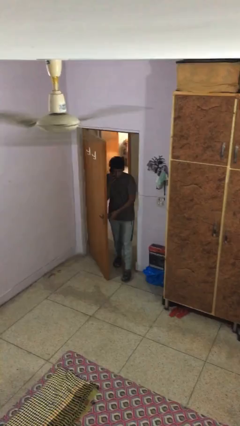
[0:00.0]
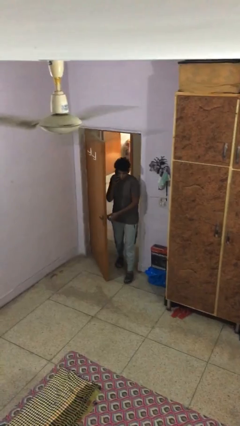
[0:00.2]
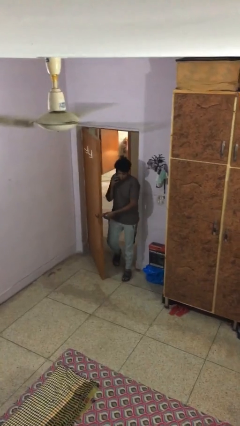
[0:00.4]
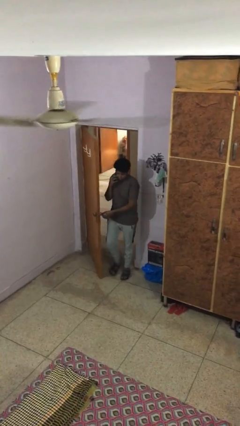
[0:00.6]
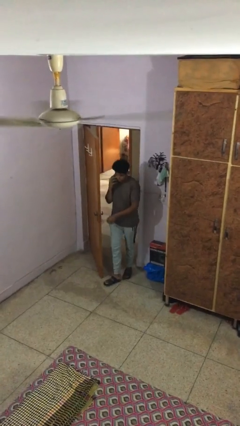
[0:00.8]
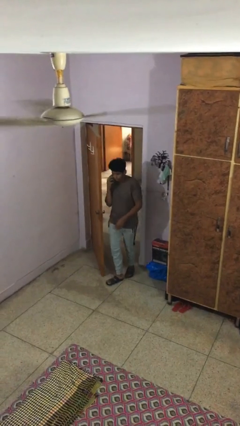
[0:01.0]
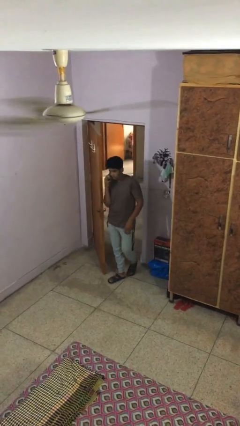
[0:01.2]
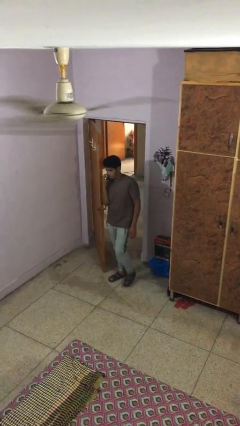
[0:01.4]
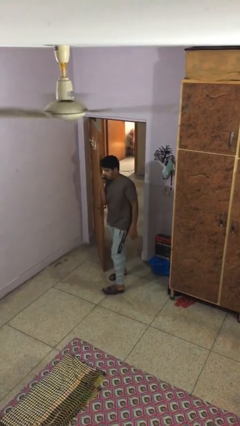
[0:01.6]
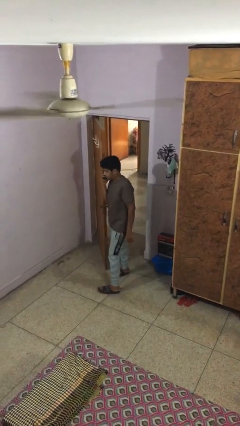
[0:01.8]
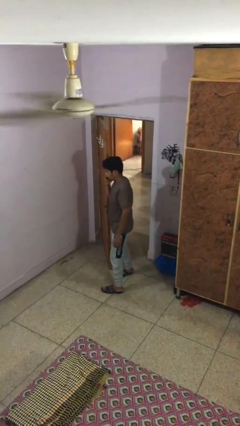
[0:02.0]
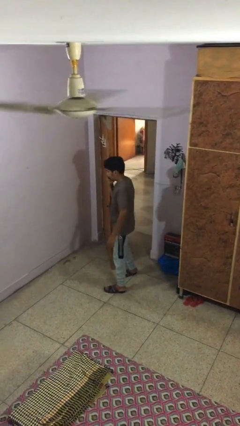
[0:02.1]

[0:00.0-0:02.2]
person enters scene through structure

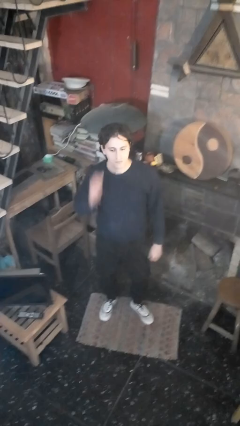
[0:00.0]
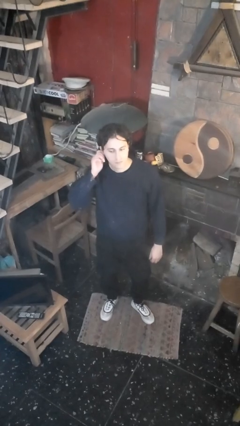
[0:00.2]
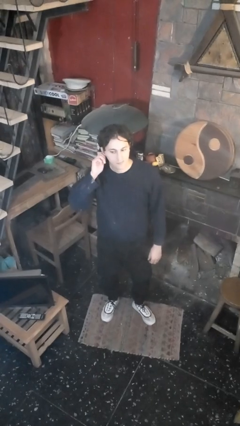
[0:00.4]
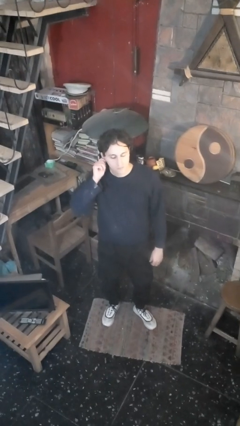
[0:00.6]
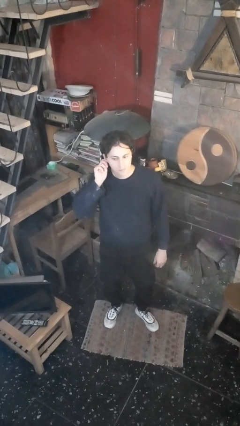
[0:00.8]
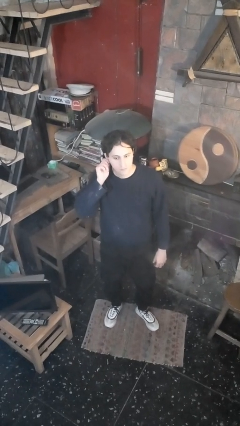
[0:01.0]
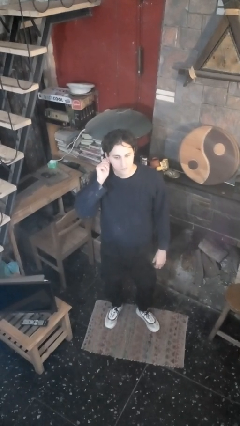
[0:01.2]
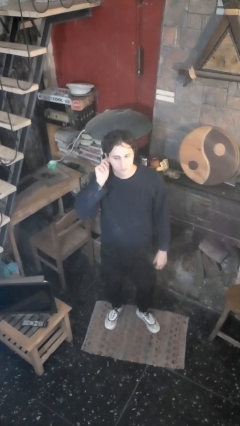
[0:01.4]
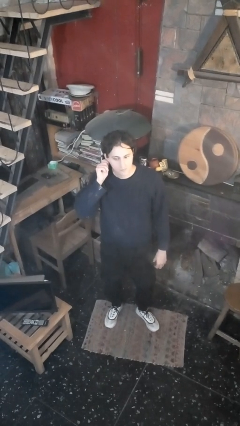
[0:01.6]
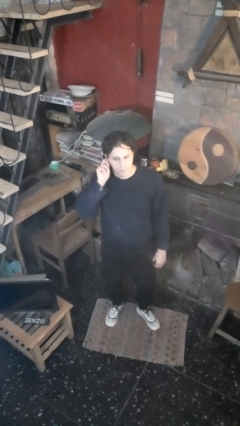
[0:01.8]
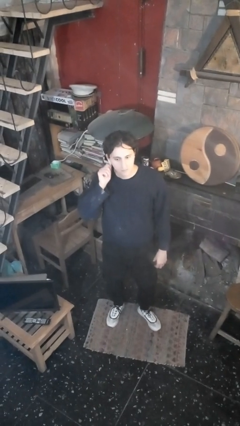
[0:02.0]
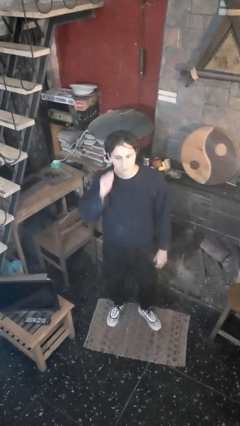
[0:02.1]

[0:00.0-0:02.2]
person touches earlobe

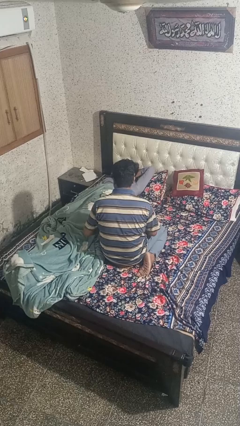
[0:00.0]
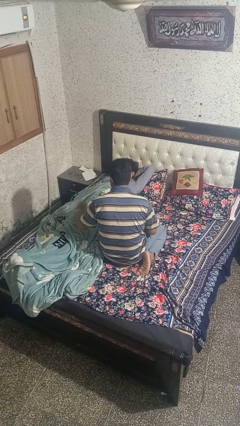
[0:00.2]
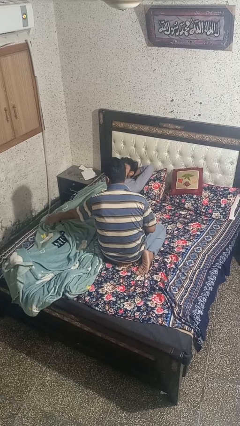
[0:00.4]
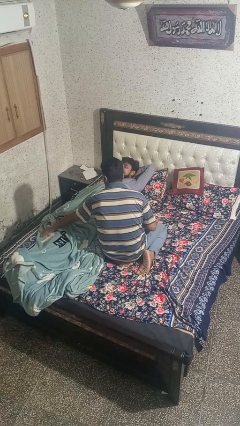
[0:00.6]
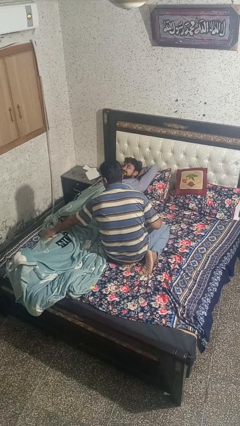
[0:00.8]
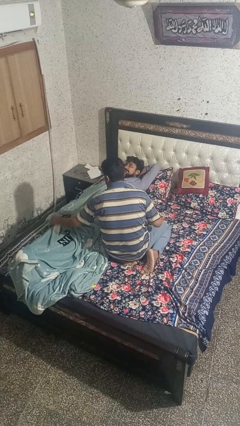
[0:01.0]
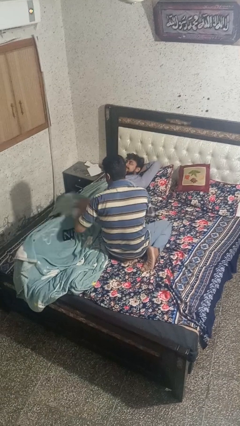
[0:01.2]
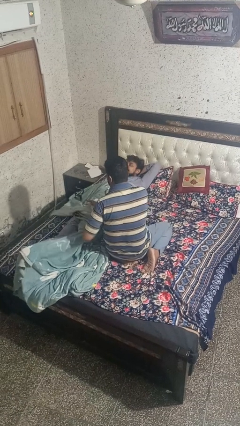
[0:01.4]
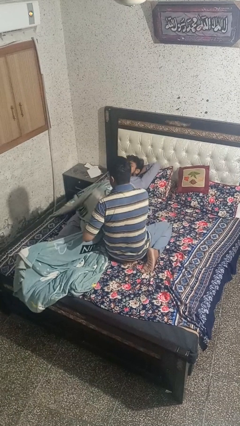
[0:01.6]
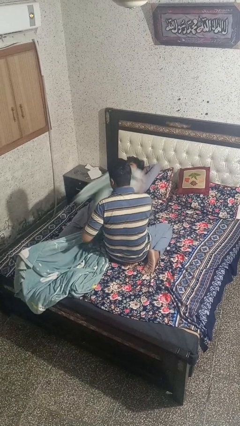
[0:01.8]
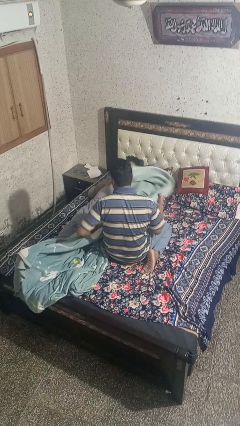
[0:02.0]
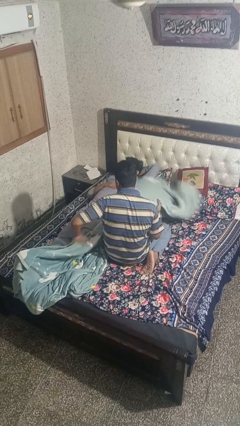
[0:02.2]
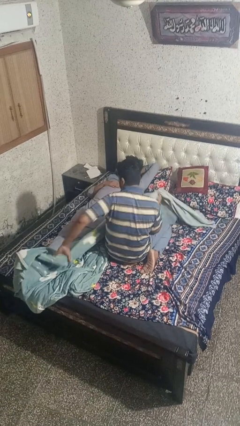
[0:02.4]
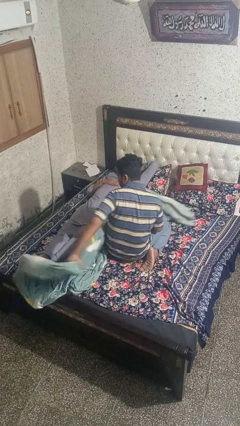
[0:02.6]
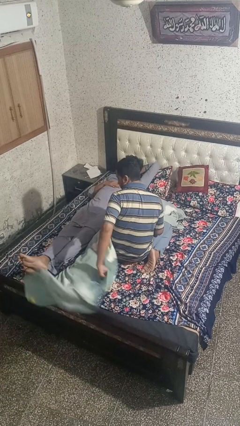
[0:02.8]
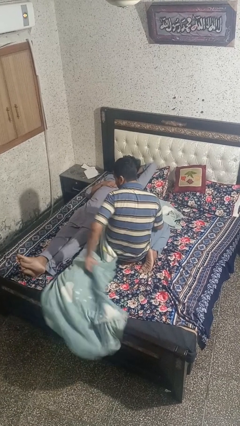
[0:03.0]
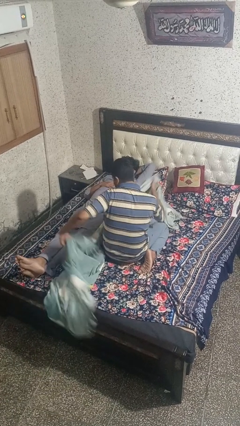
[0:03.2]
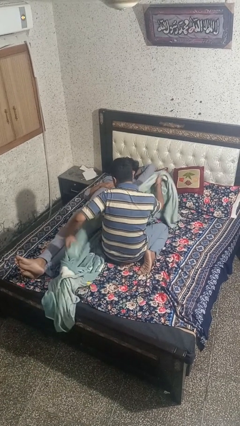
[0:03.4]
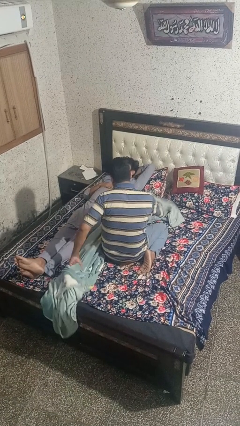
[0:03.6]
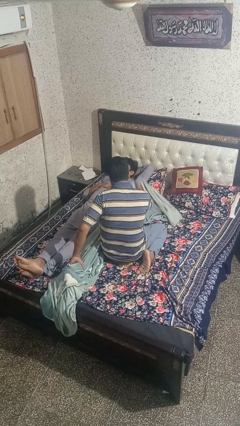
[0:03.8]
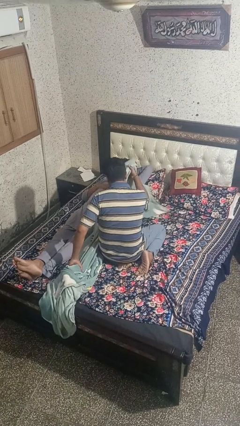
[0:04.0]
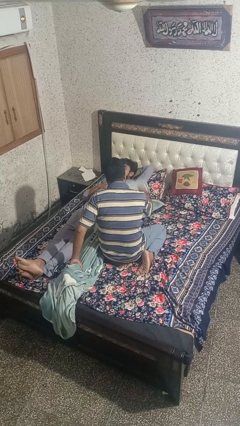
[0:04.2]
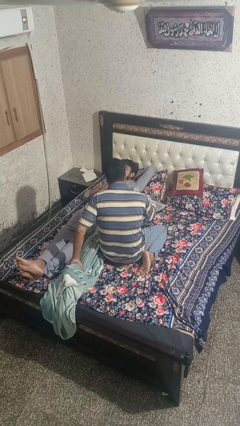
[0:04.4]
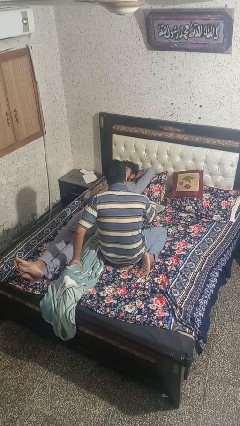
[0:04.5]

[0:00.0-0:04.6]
person uncovers friend with blanket

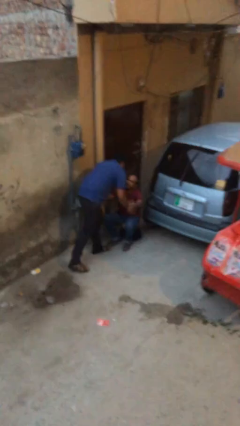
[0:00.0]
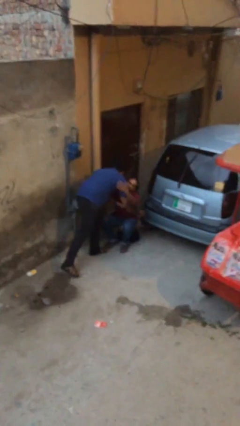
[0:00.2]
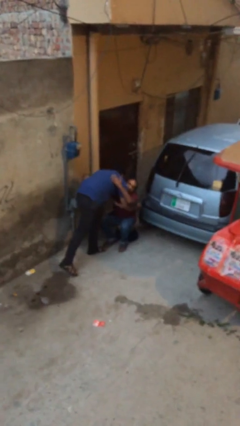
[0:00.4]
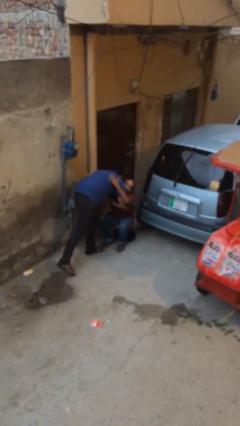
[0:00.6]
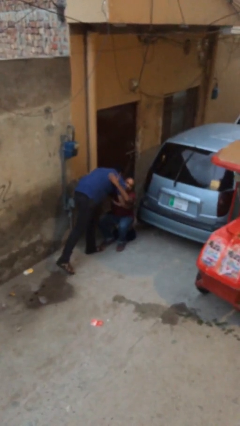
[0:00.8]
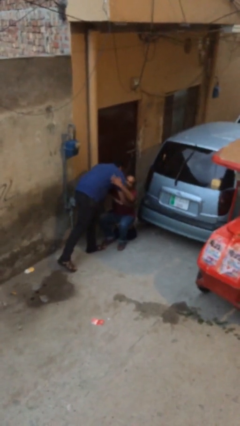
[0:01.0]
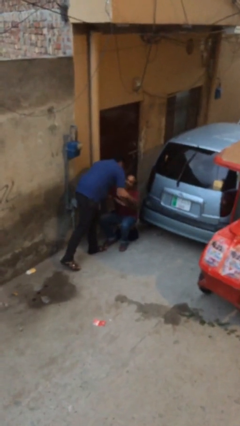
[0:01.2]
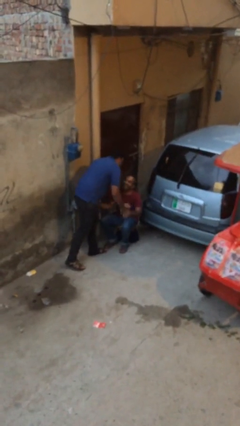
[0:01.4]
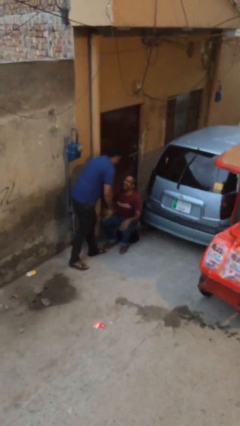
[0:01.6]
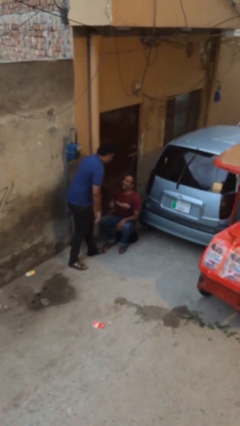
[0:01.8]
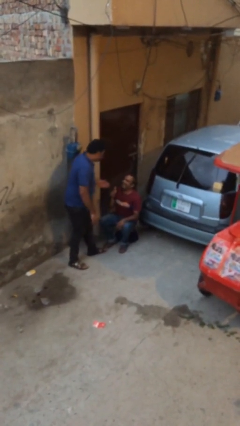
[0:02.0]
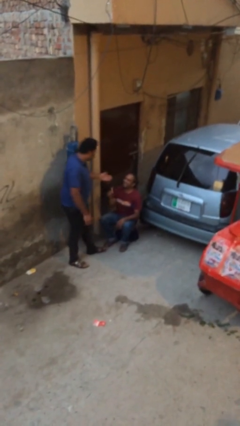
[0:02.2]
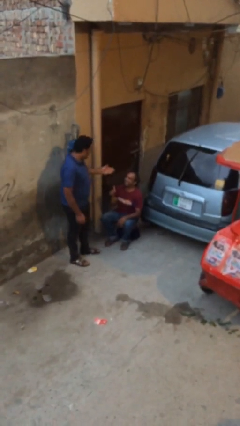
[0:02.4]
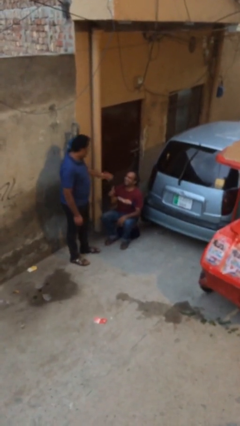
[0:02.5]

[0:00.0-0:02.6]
person embraces person

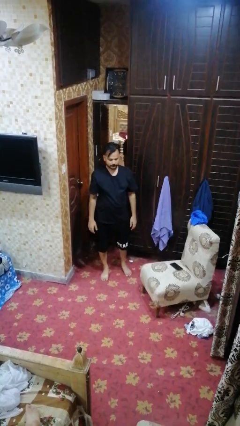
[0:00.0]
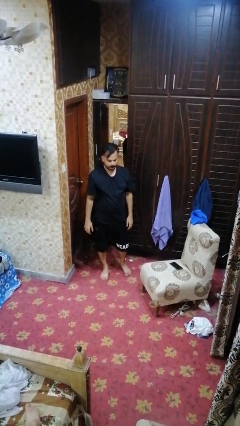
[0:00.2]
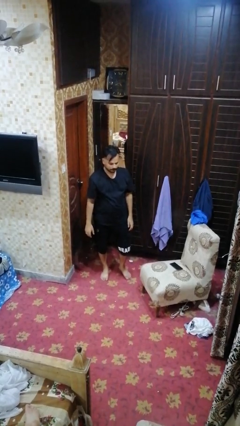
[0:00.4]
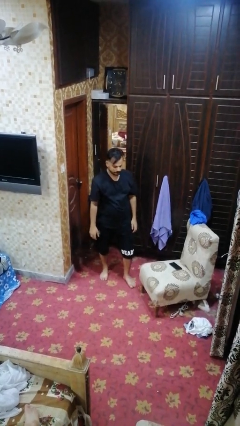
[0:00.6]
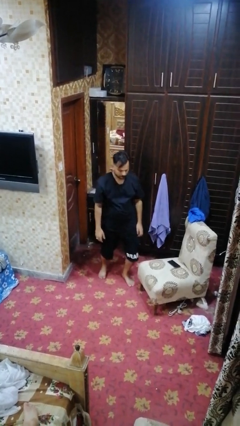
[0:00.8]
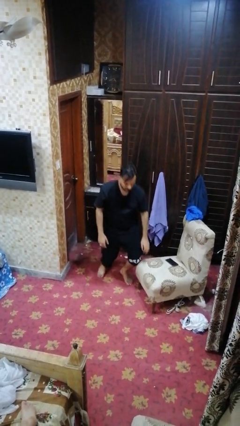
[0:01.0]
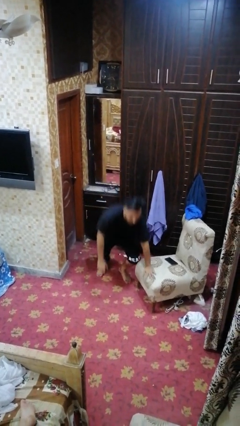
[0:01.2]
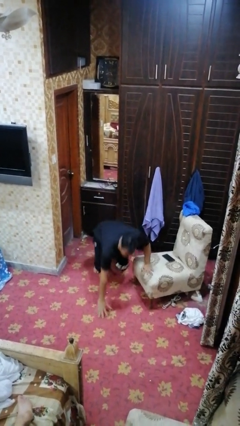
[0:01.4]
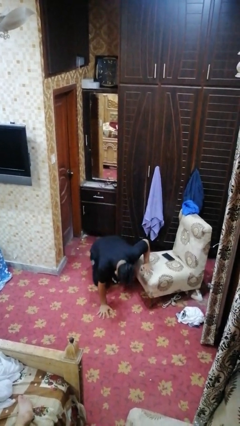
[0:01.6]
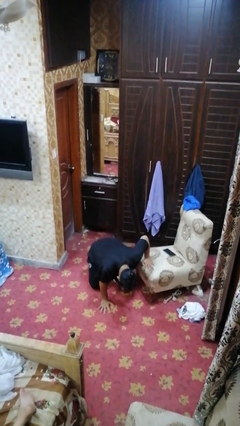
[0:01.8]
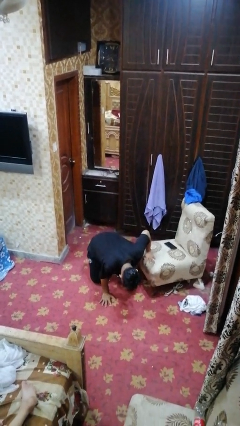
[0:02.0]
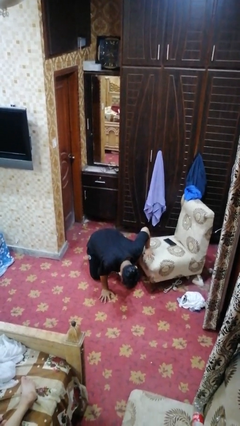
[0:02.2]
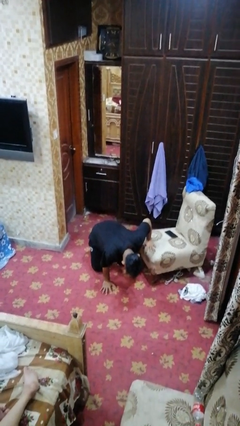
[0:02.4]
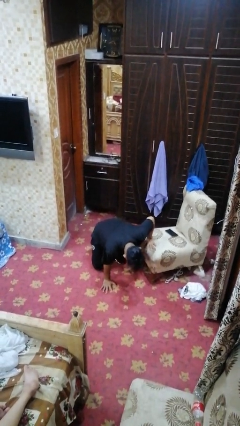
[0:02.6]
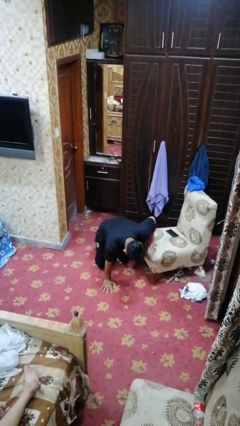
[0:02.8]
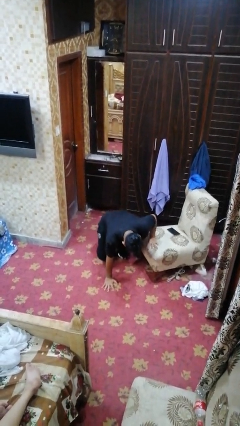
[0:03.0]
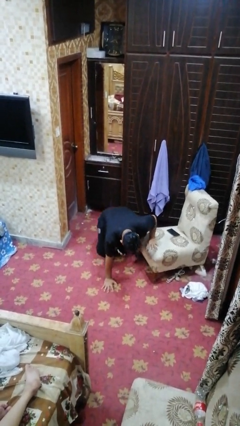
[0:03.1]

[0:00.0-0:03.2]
person trips on object on floor

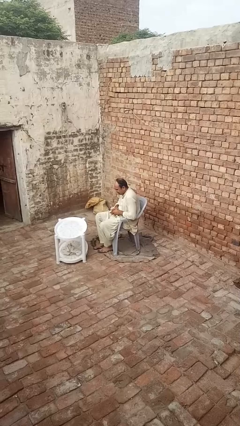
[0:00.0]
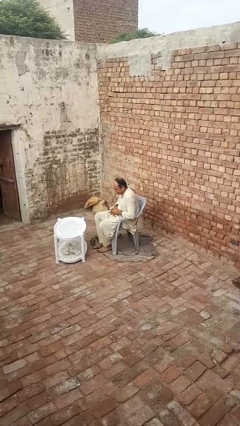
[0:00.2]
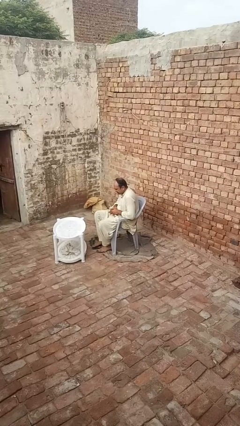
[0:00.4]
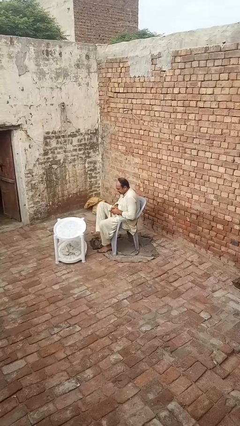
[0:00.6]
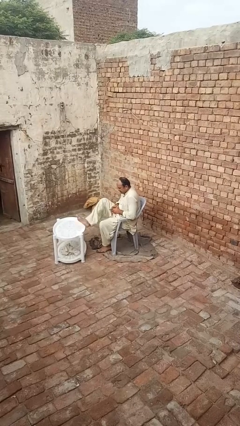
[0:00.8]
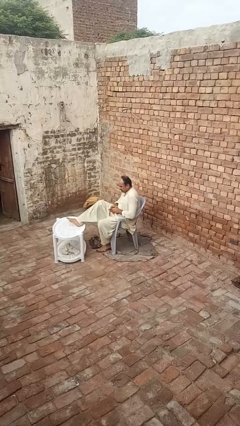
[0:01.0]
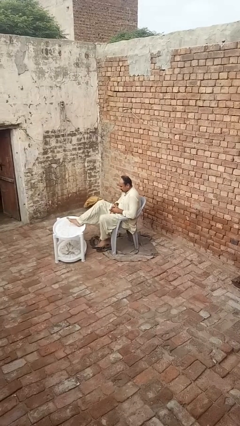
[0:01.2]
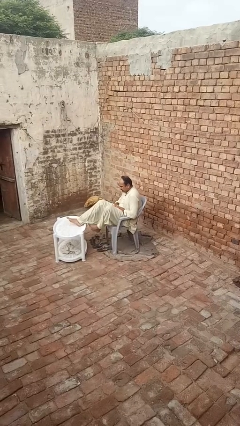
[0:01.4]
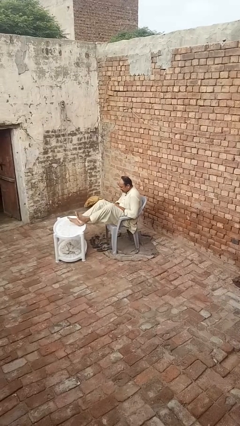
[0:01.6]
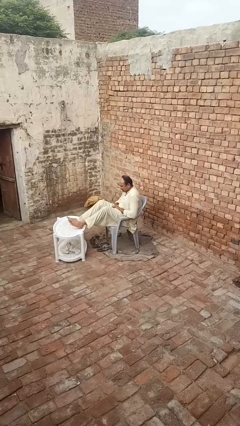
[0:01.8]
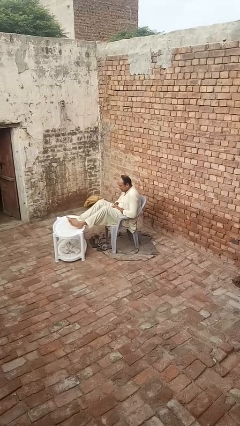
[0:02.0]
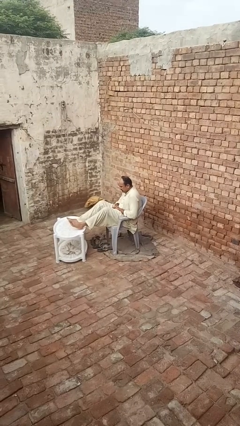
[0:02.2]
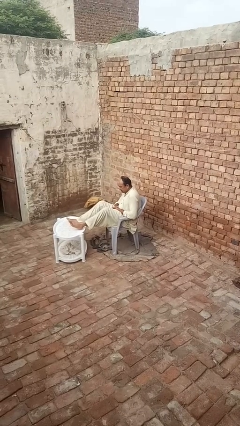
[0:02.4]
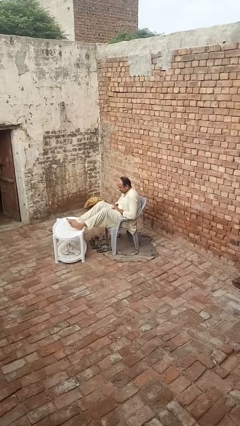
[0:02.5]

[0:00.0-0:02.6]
person puts feet up
